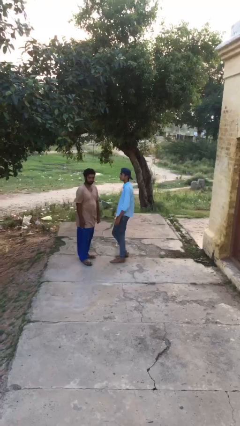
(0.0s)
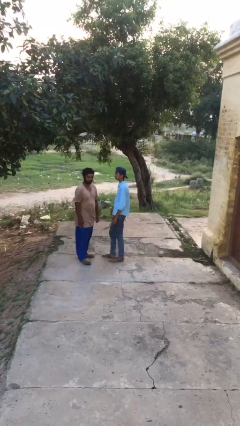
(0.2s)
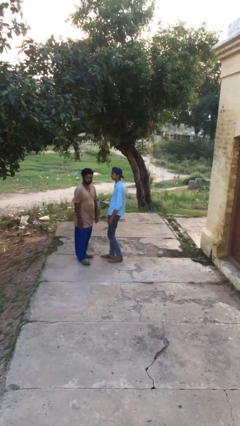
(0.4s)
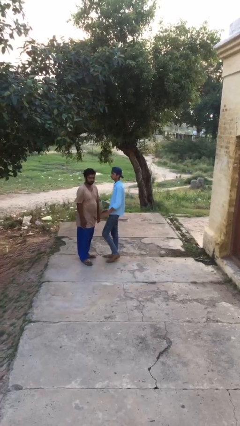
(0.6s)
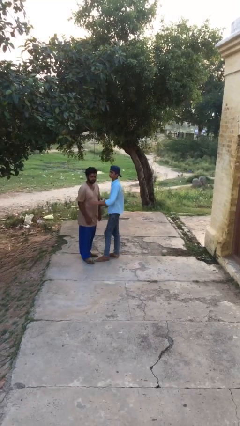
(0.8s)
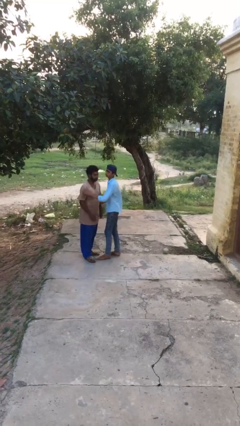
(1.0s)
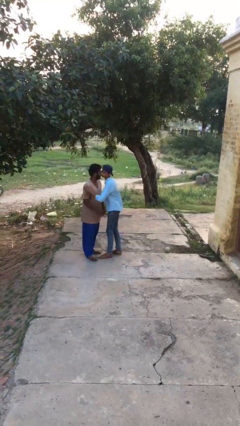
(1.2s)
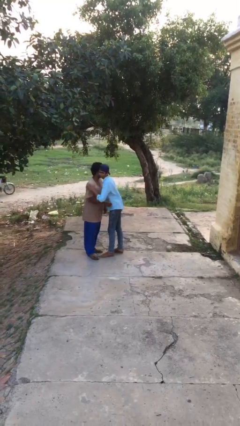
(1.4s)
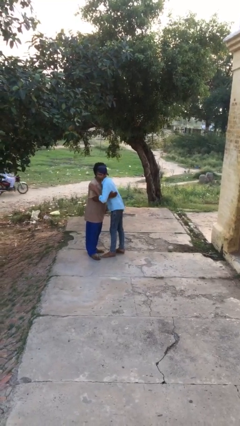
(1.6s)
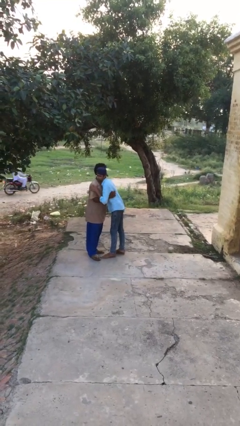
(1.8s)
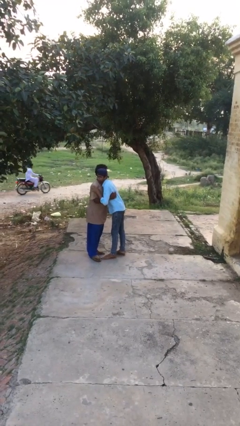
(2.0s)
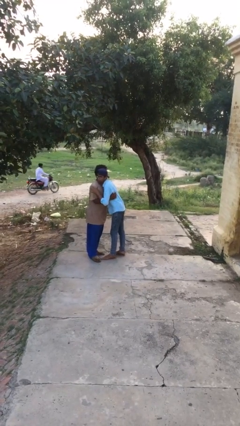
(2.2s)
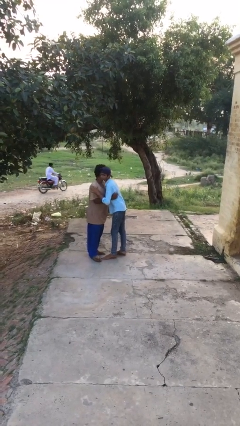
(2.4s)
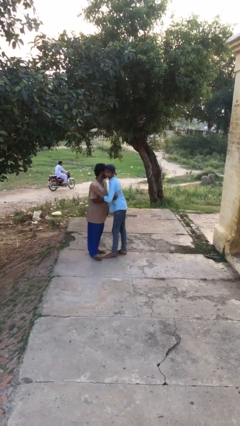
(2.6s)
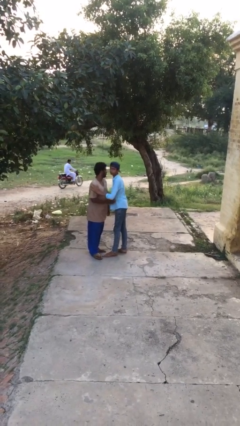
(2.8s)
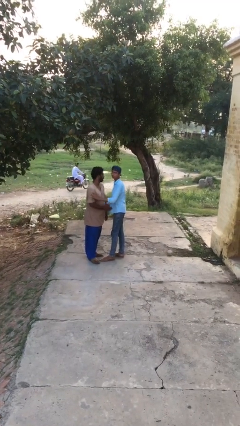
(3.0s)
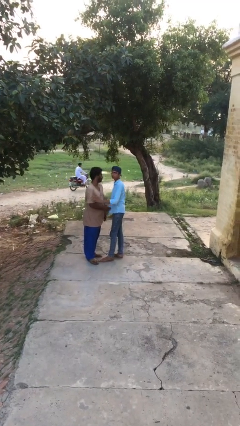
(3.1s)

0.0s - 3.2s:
person embraces person

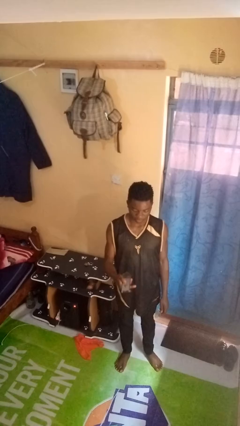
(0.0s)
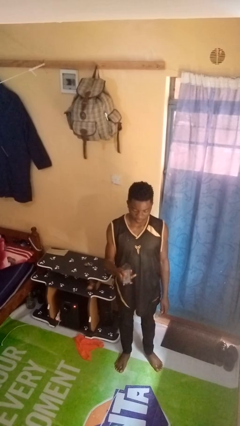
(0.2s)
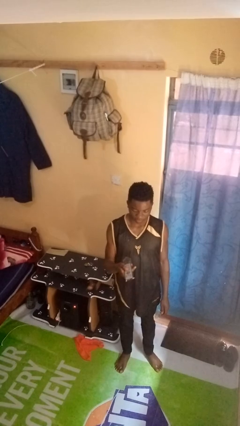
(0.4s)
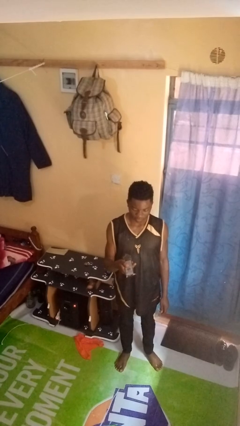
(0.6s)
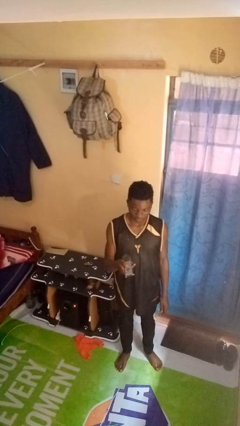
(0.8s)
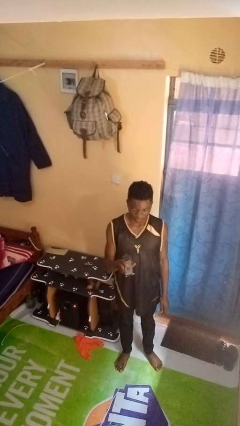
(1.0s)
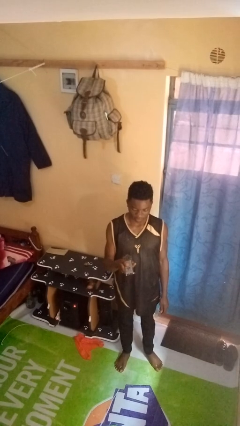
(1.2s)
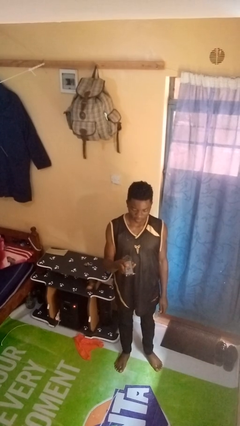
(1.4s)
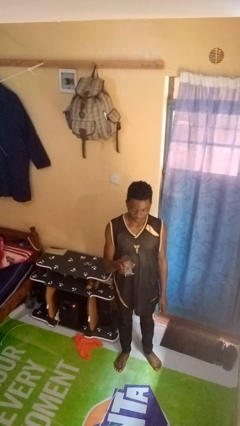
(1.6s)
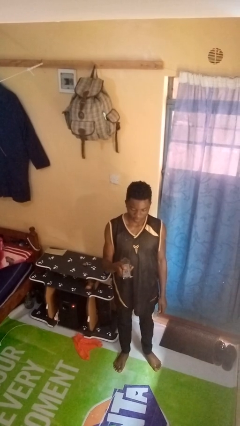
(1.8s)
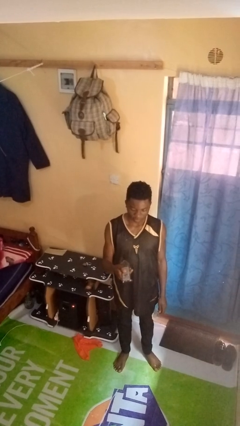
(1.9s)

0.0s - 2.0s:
person uses television remote

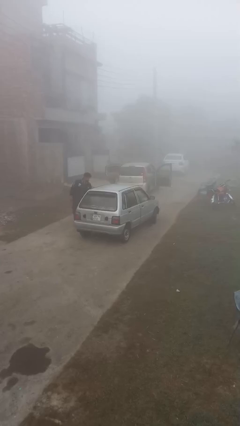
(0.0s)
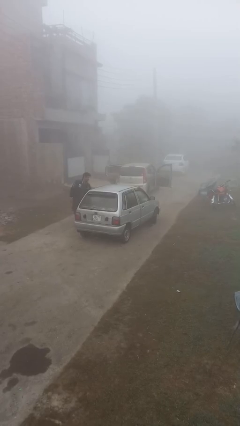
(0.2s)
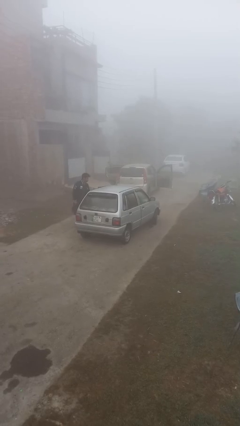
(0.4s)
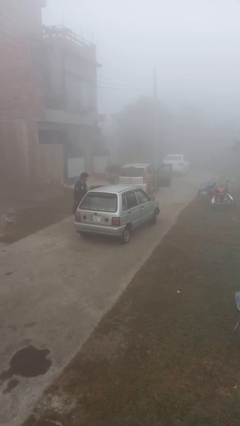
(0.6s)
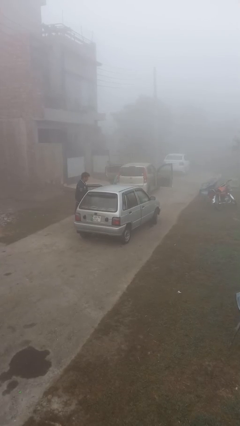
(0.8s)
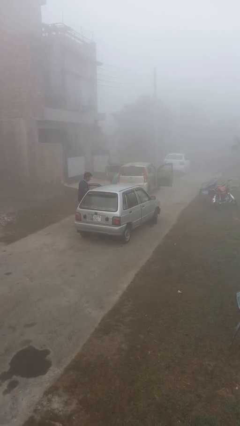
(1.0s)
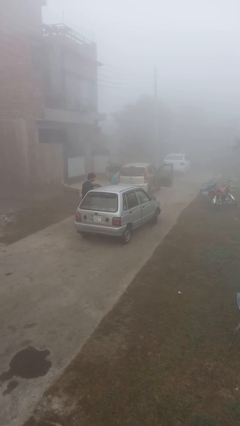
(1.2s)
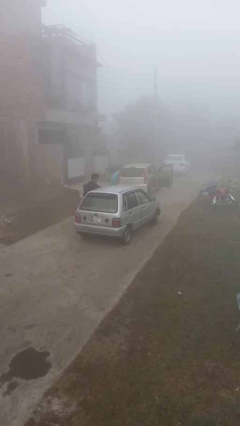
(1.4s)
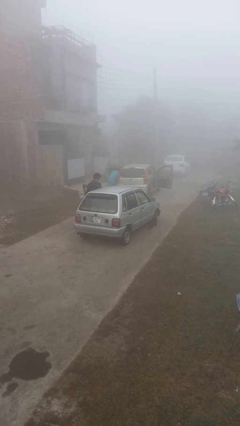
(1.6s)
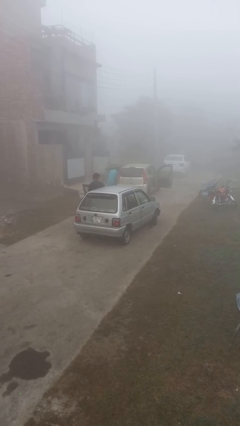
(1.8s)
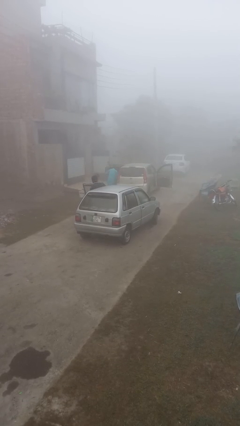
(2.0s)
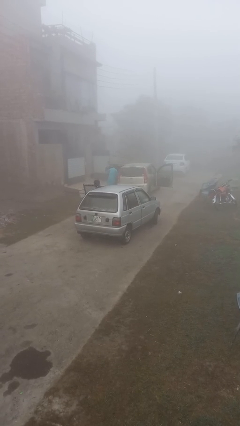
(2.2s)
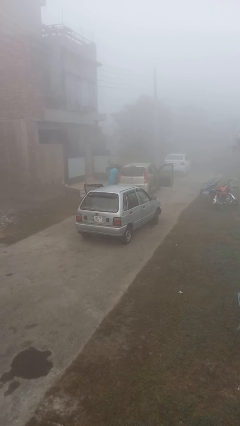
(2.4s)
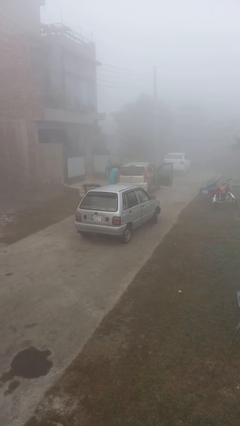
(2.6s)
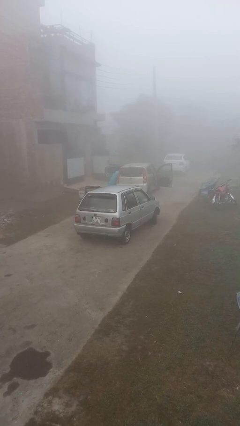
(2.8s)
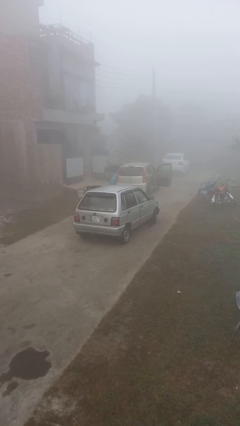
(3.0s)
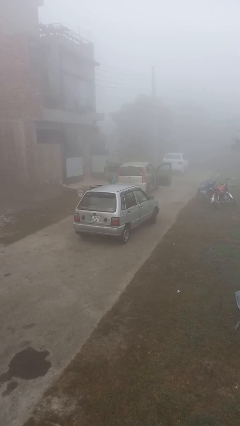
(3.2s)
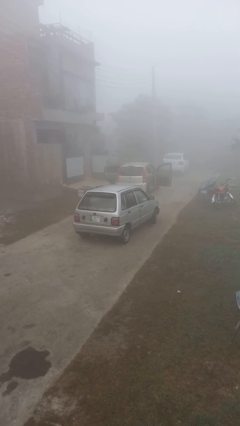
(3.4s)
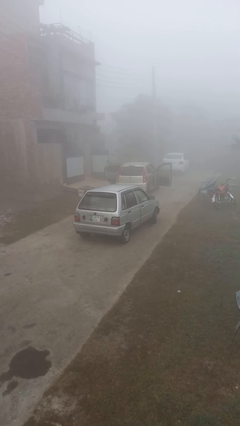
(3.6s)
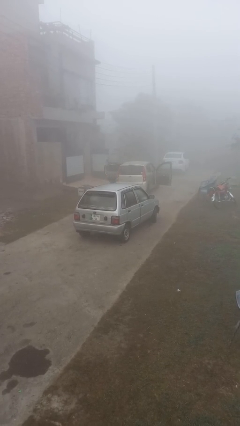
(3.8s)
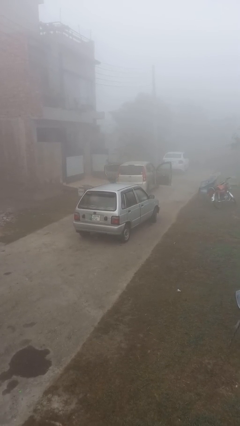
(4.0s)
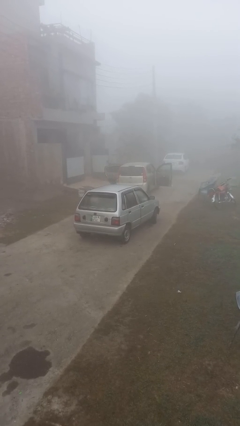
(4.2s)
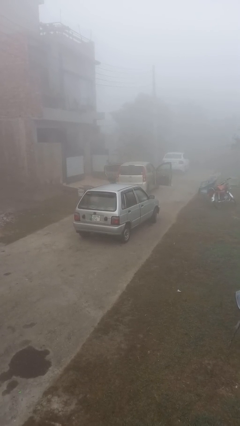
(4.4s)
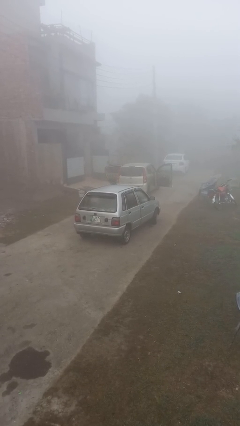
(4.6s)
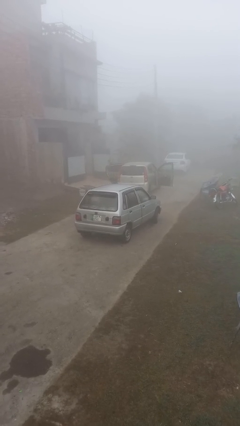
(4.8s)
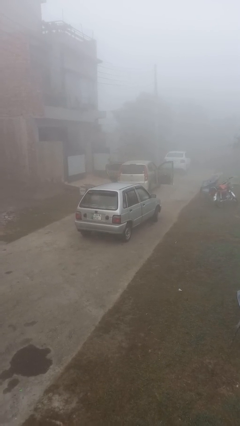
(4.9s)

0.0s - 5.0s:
car picks up person

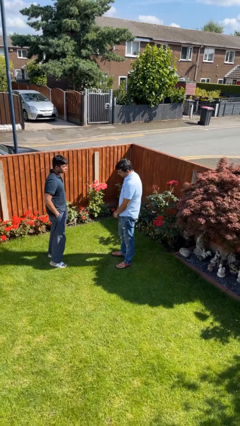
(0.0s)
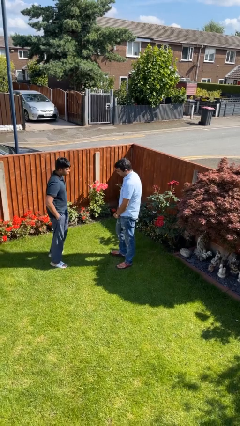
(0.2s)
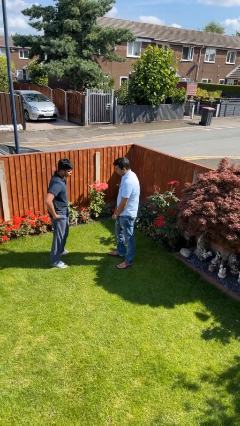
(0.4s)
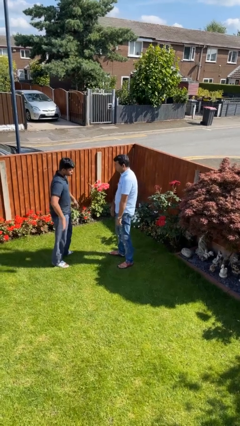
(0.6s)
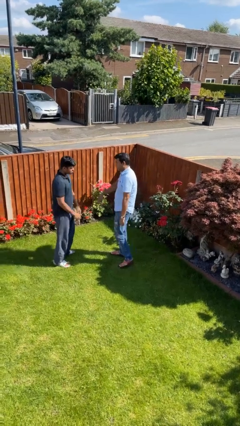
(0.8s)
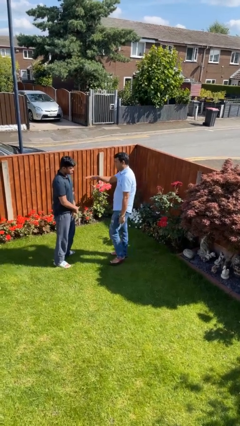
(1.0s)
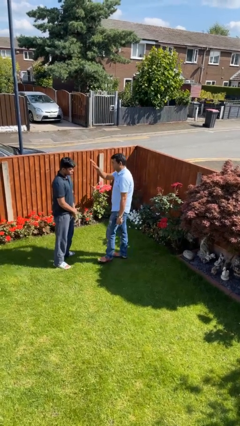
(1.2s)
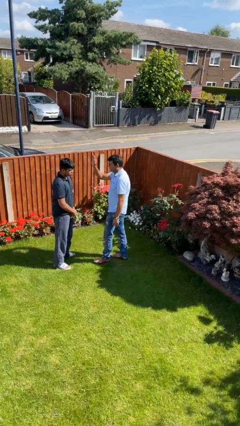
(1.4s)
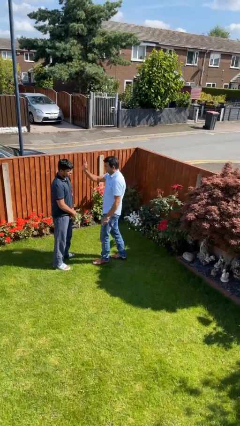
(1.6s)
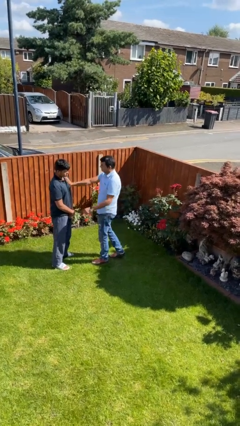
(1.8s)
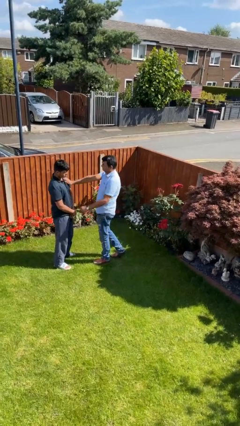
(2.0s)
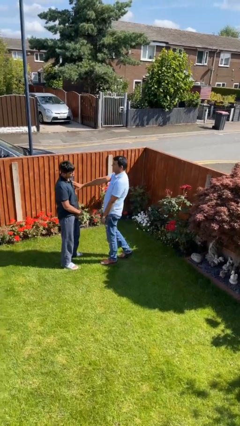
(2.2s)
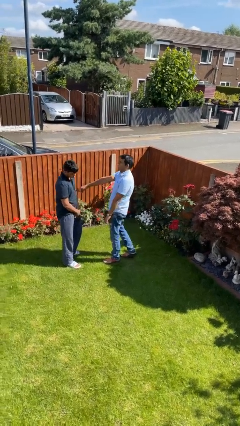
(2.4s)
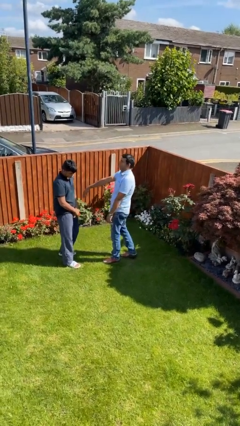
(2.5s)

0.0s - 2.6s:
person shoves person

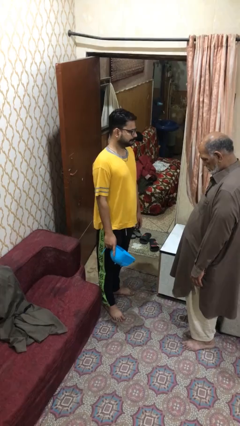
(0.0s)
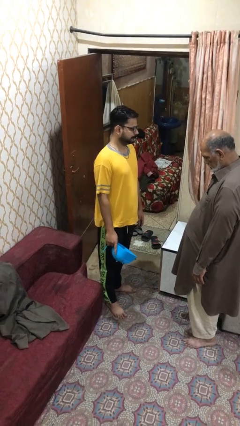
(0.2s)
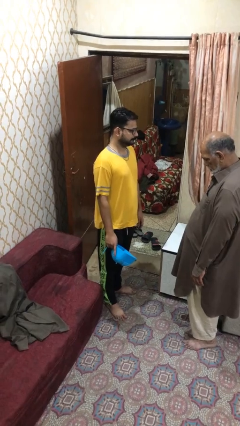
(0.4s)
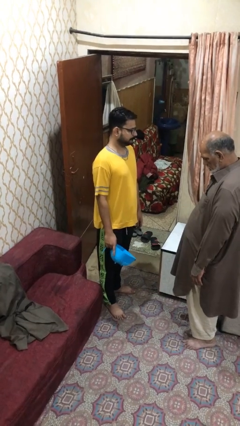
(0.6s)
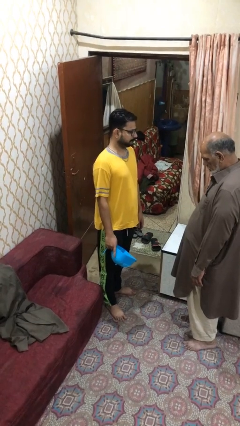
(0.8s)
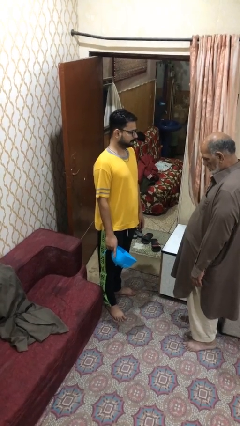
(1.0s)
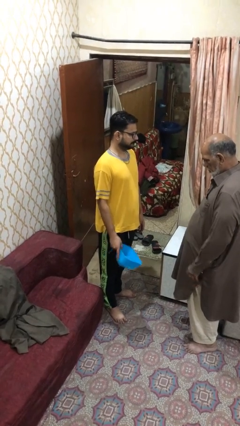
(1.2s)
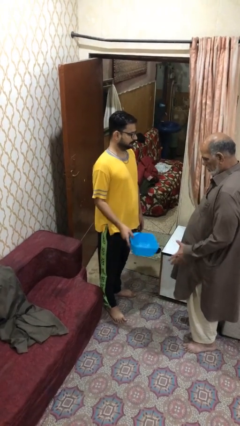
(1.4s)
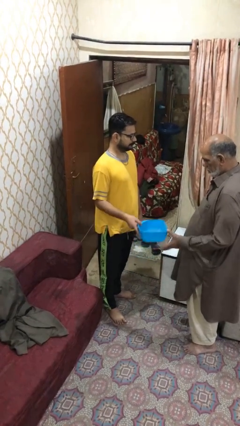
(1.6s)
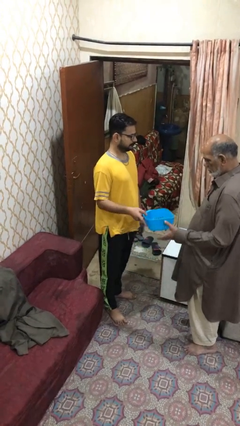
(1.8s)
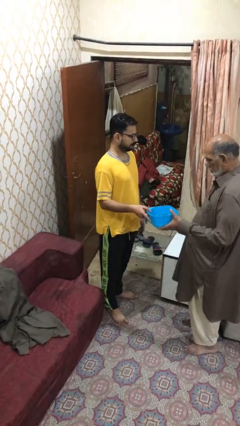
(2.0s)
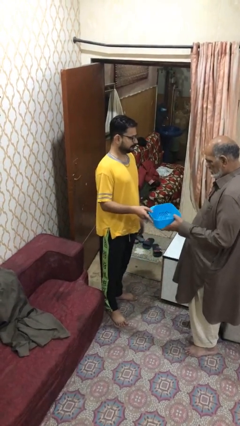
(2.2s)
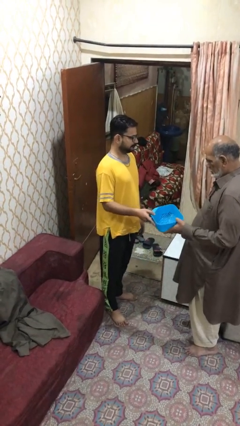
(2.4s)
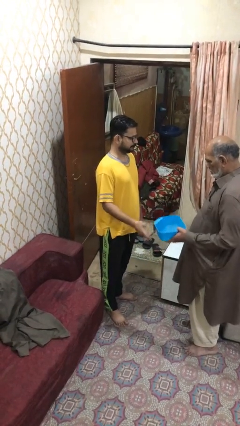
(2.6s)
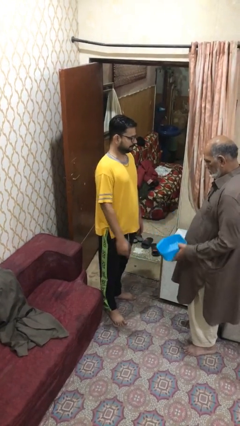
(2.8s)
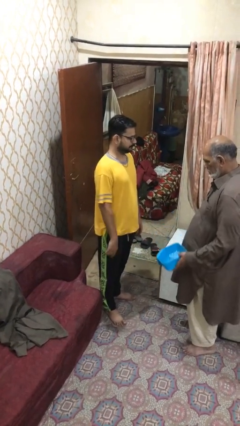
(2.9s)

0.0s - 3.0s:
person transfers object to person

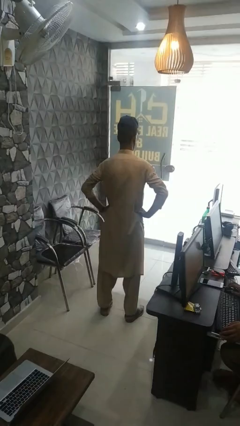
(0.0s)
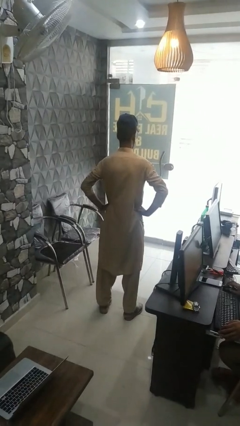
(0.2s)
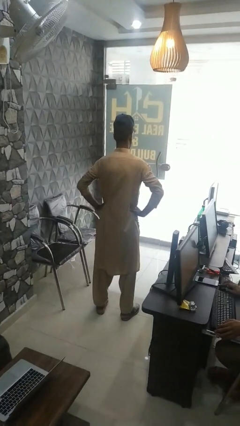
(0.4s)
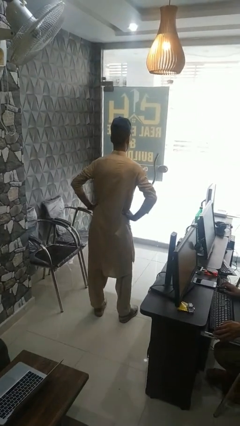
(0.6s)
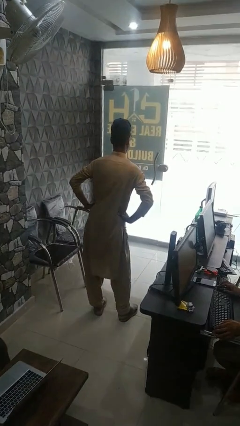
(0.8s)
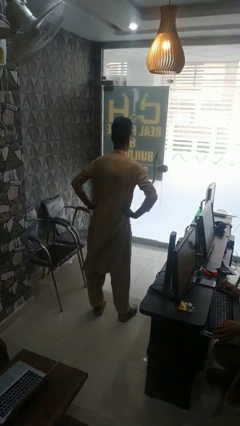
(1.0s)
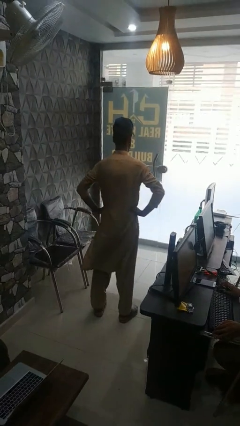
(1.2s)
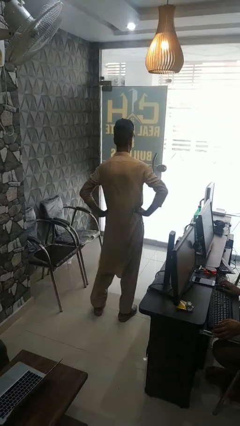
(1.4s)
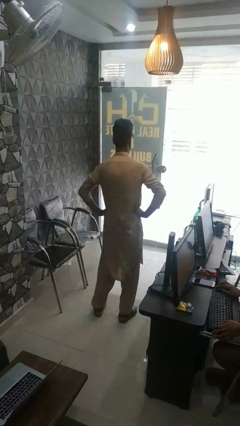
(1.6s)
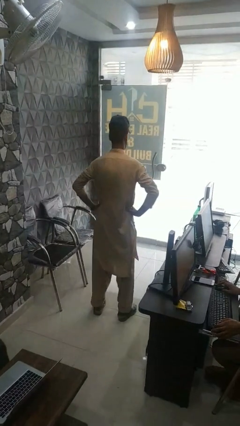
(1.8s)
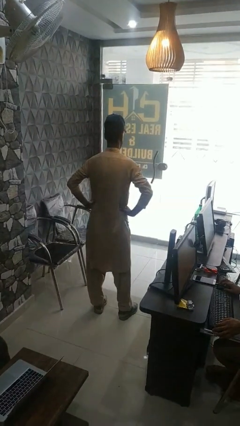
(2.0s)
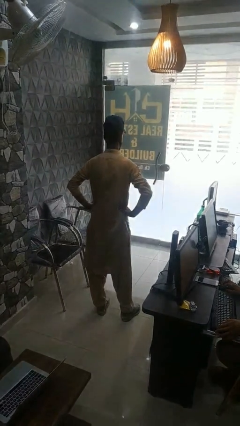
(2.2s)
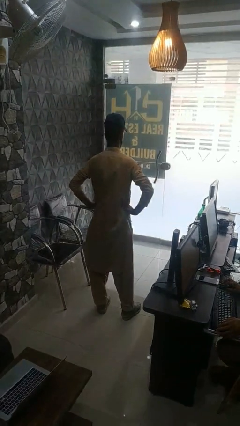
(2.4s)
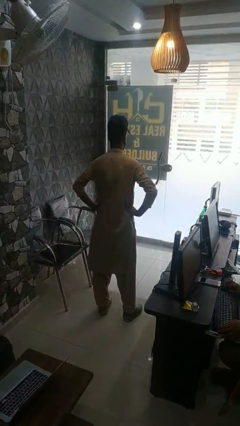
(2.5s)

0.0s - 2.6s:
person wiggles hips
